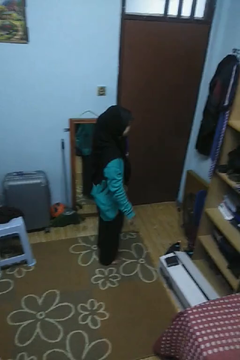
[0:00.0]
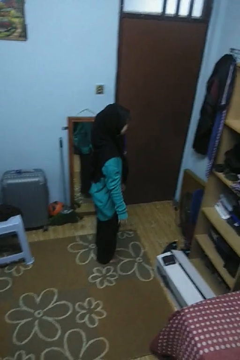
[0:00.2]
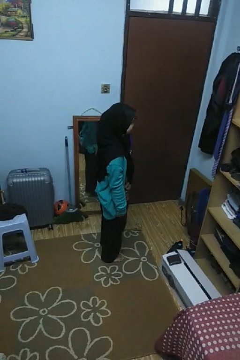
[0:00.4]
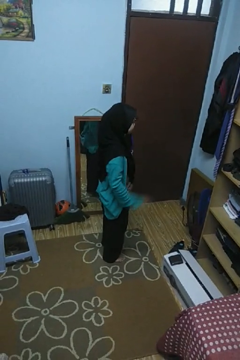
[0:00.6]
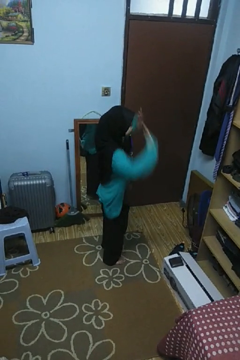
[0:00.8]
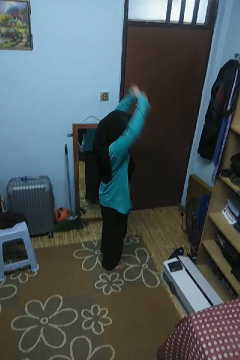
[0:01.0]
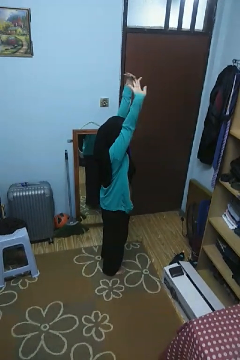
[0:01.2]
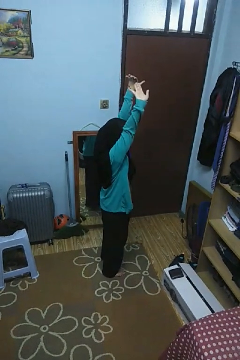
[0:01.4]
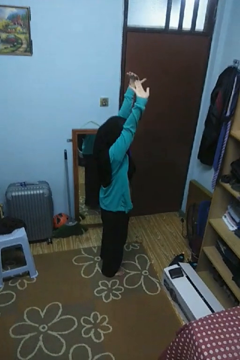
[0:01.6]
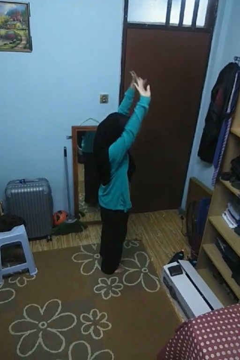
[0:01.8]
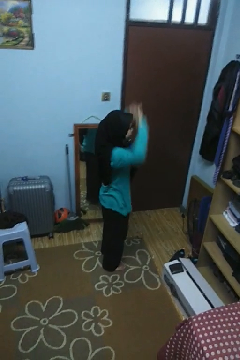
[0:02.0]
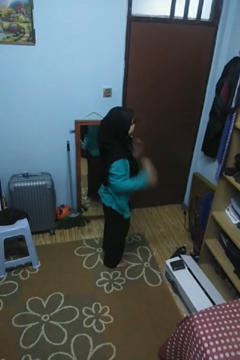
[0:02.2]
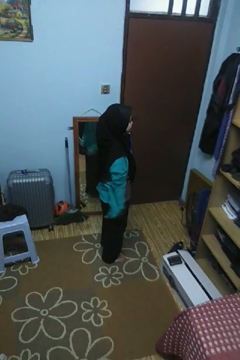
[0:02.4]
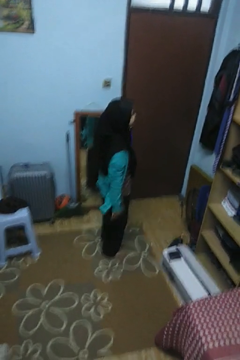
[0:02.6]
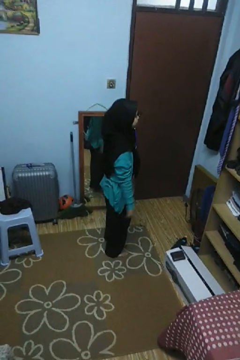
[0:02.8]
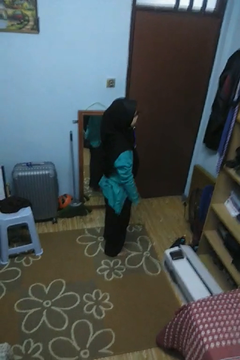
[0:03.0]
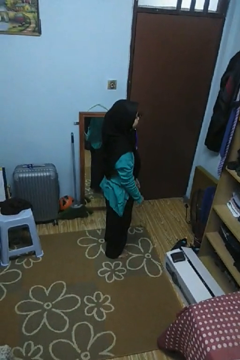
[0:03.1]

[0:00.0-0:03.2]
person stretches arms over head

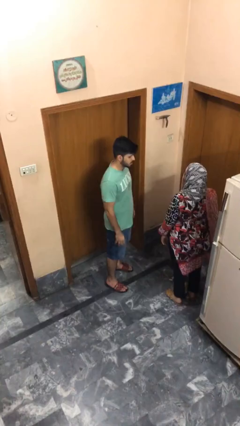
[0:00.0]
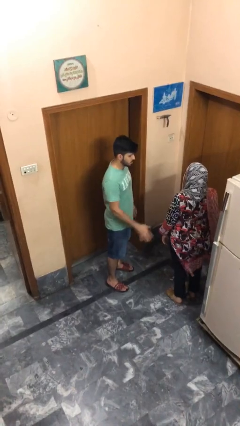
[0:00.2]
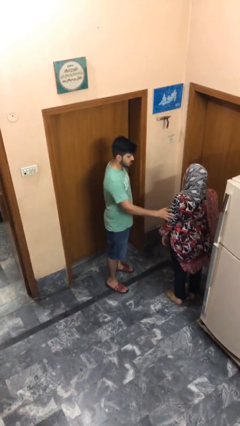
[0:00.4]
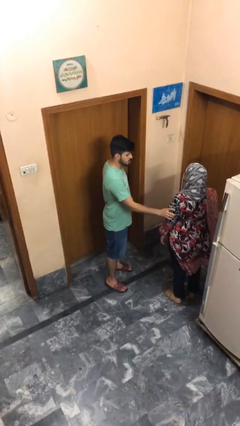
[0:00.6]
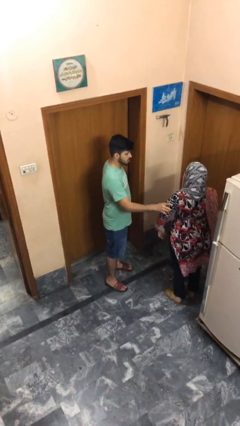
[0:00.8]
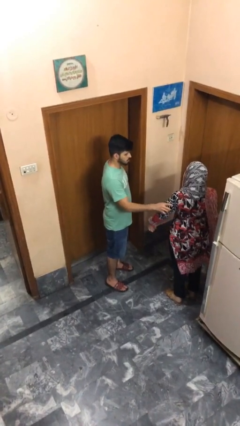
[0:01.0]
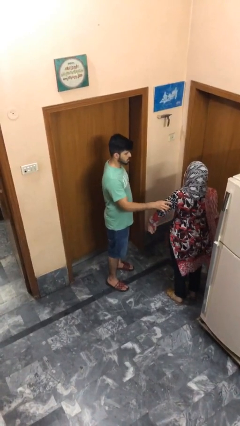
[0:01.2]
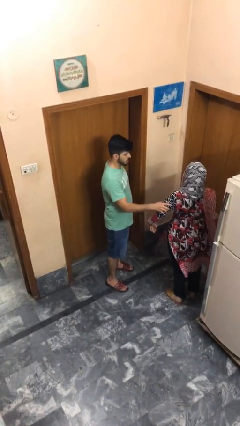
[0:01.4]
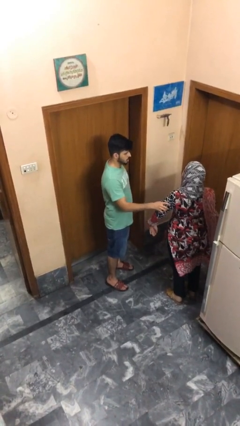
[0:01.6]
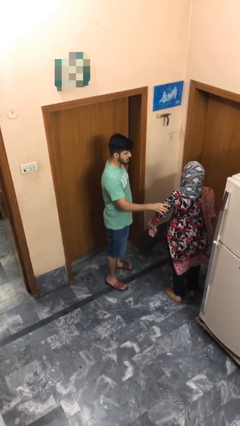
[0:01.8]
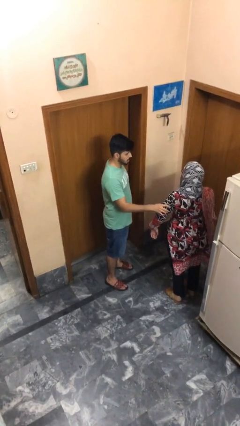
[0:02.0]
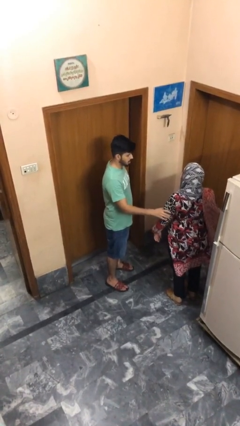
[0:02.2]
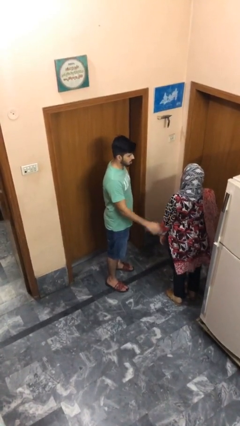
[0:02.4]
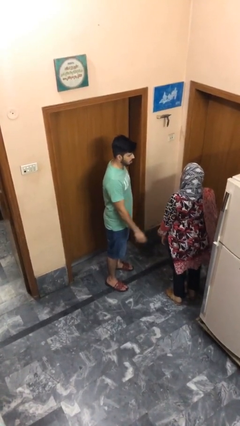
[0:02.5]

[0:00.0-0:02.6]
person grabs person by bicep

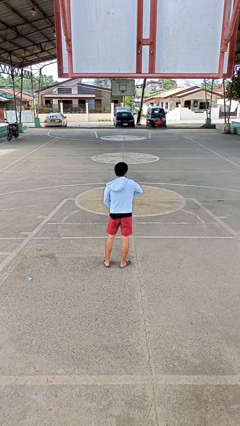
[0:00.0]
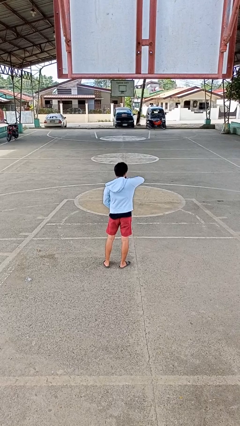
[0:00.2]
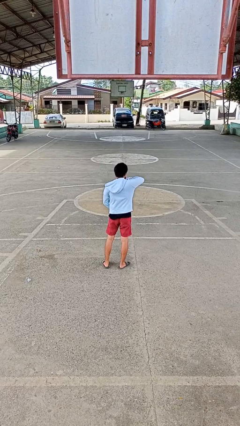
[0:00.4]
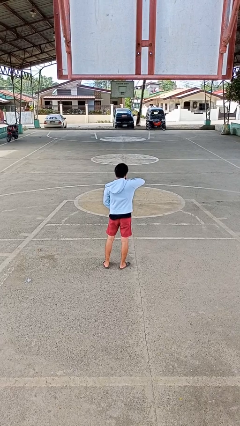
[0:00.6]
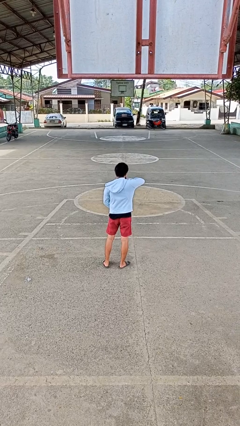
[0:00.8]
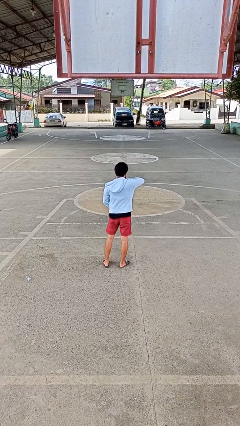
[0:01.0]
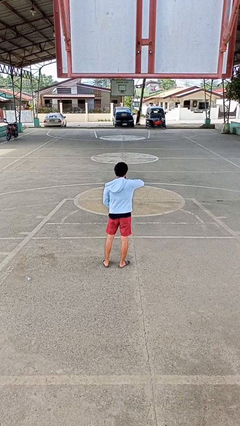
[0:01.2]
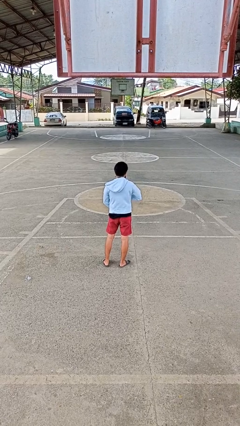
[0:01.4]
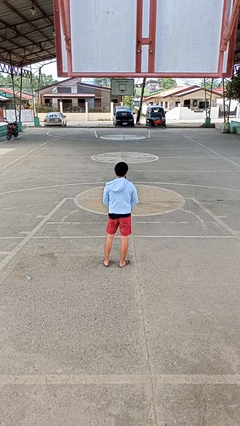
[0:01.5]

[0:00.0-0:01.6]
person zips up jacket

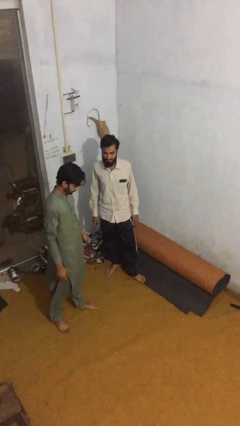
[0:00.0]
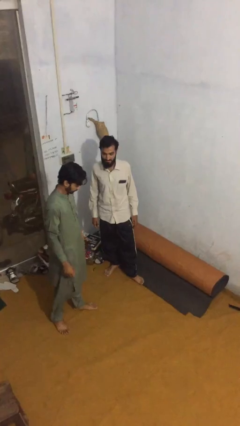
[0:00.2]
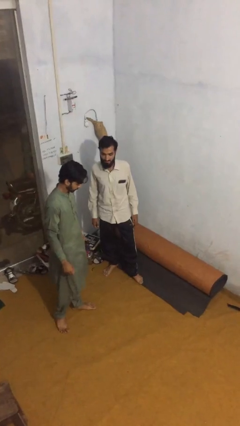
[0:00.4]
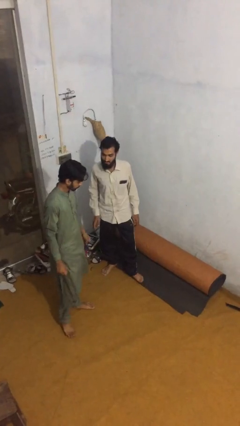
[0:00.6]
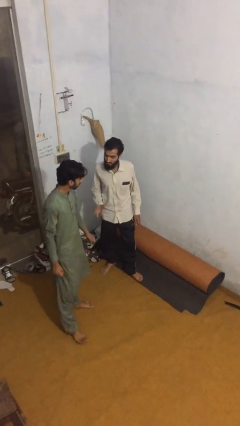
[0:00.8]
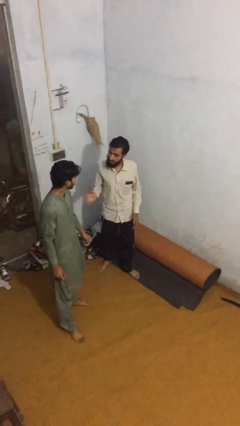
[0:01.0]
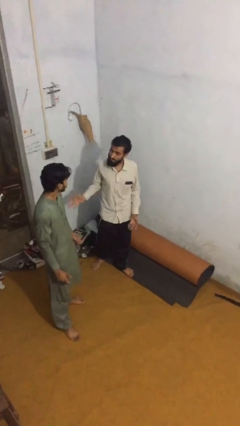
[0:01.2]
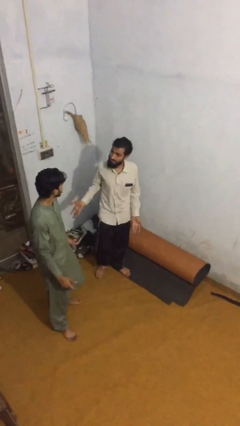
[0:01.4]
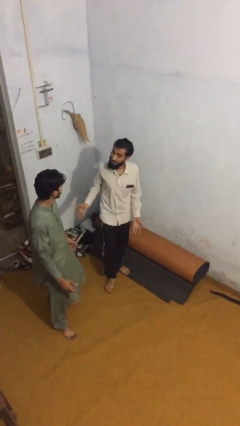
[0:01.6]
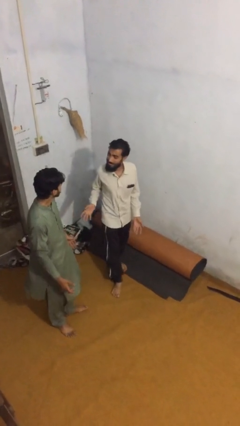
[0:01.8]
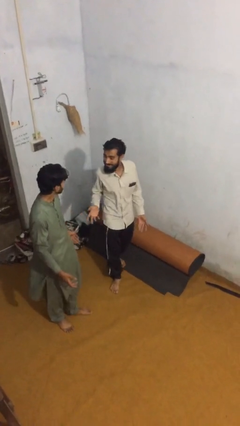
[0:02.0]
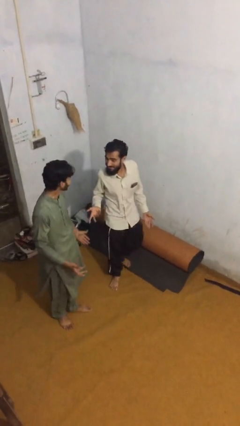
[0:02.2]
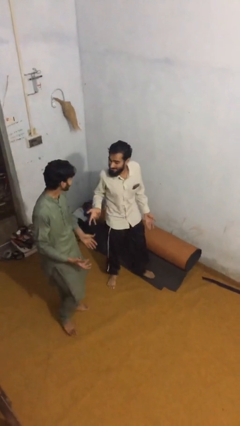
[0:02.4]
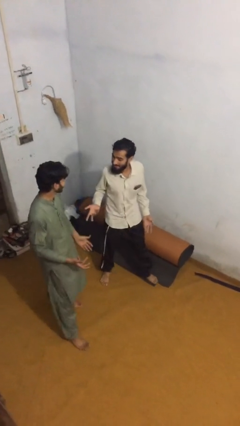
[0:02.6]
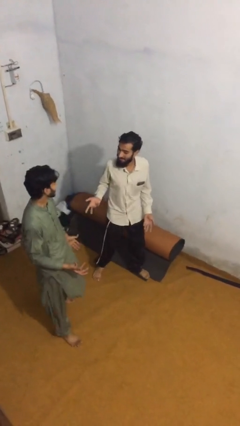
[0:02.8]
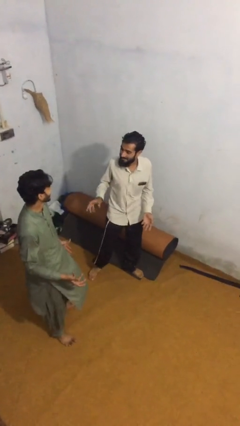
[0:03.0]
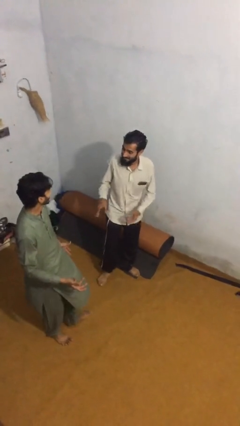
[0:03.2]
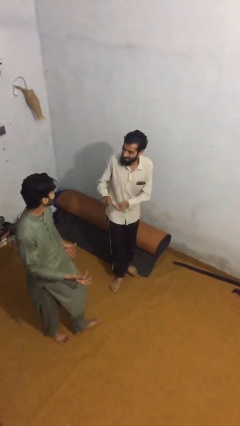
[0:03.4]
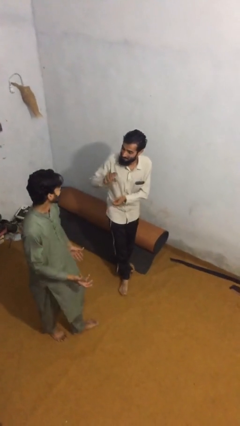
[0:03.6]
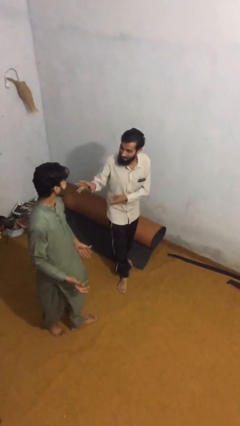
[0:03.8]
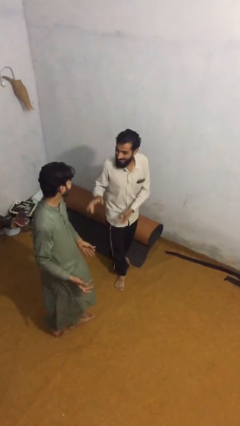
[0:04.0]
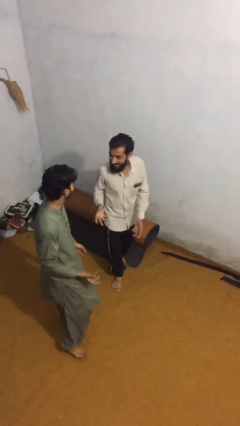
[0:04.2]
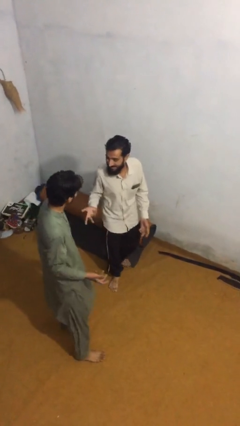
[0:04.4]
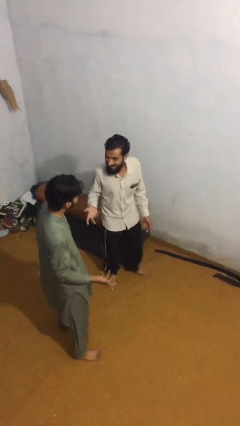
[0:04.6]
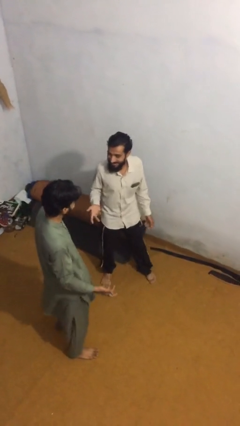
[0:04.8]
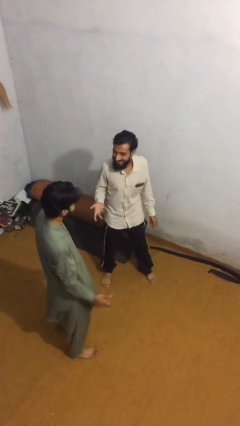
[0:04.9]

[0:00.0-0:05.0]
person talks to person

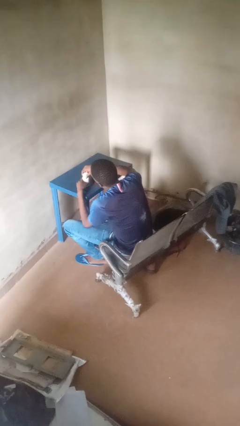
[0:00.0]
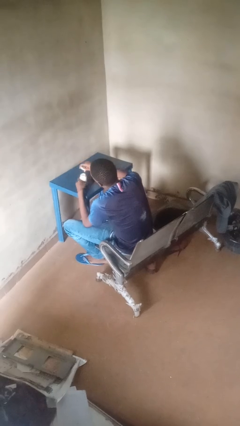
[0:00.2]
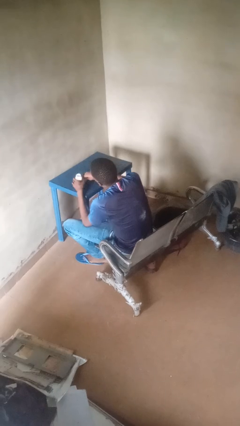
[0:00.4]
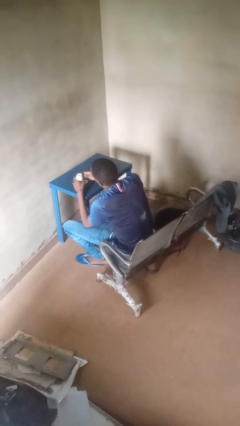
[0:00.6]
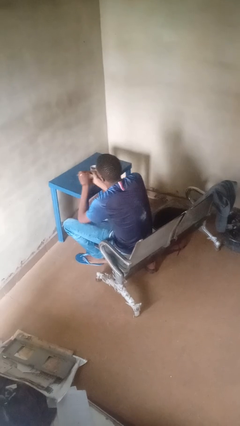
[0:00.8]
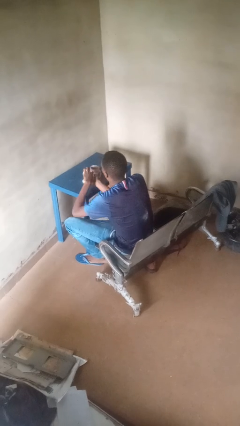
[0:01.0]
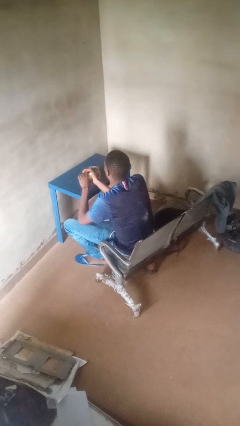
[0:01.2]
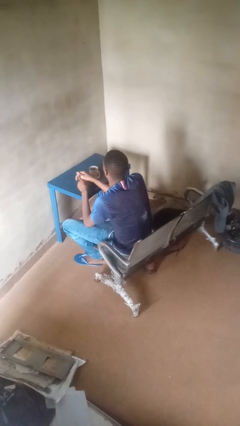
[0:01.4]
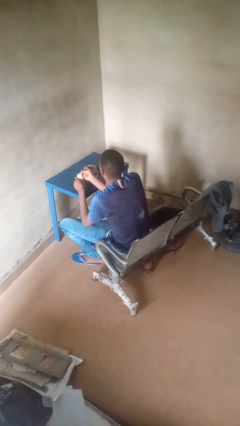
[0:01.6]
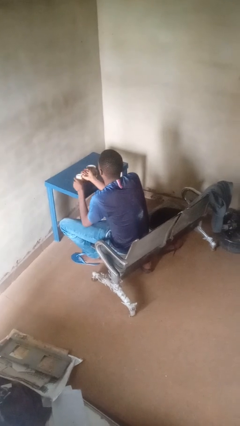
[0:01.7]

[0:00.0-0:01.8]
person takes medicine pills

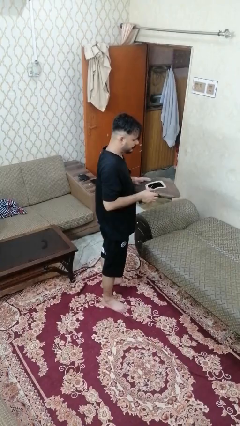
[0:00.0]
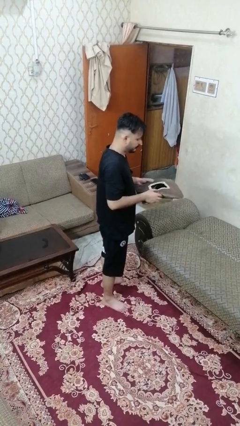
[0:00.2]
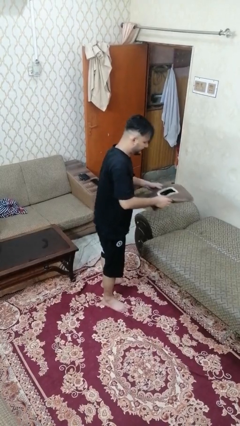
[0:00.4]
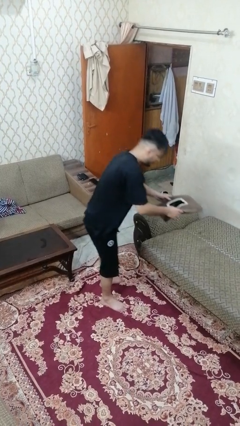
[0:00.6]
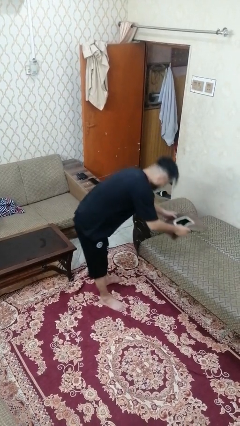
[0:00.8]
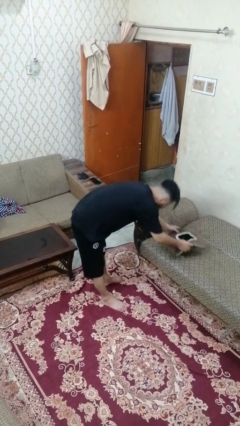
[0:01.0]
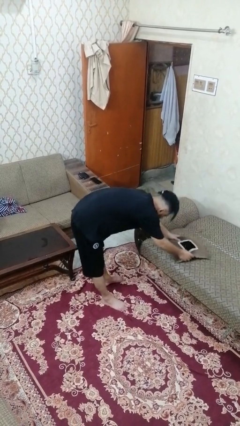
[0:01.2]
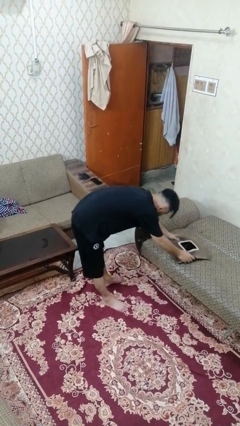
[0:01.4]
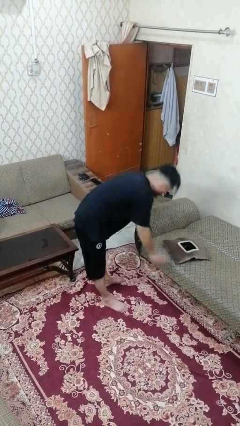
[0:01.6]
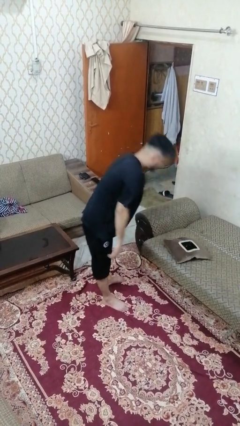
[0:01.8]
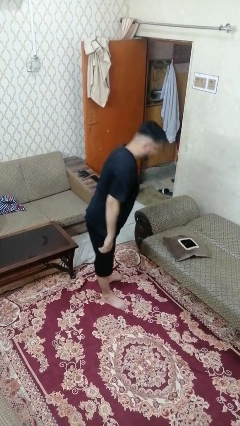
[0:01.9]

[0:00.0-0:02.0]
person puts down object on couch

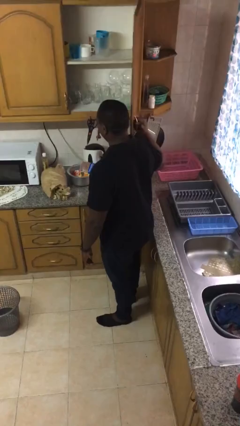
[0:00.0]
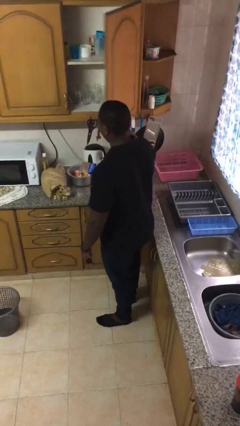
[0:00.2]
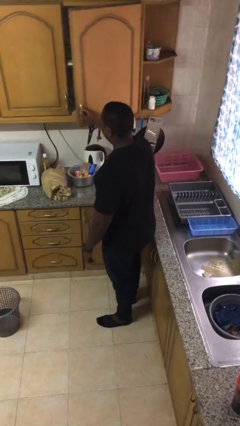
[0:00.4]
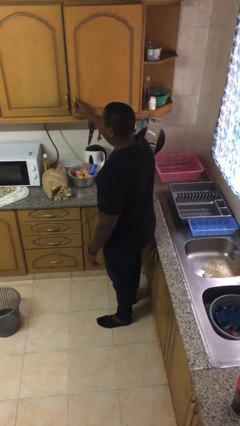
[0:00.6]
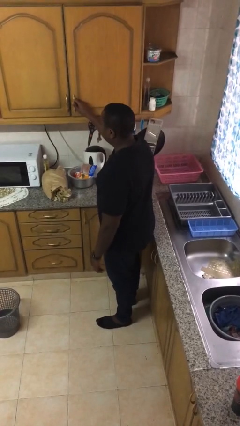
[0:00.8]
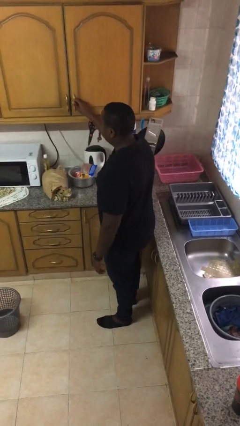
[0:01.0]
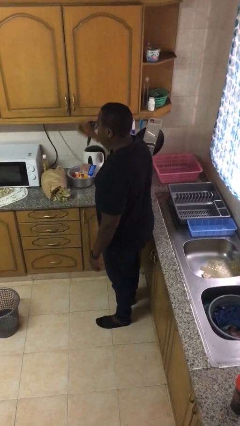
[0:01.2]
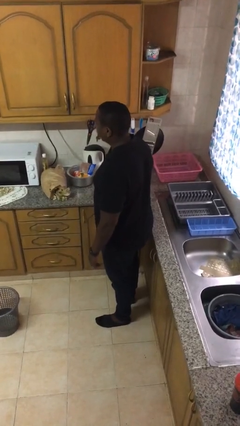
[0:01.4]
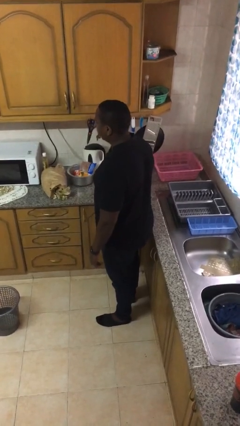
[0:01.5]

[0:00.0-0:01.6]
person closes cabinet
